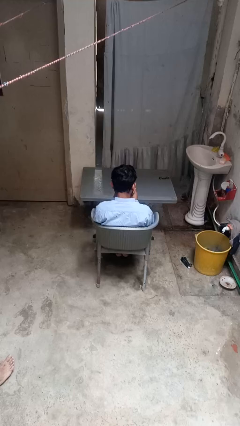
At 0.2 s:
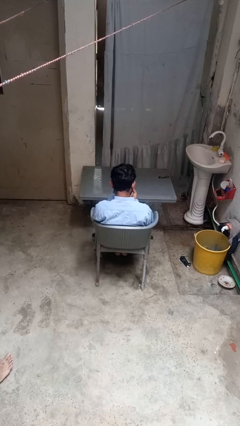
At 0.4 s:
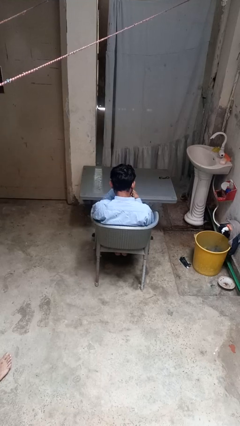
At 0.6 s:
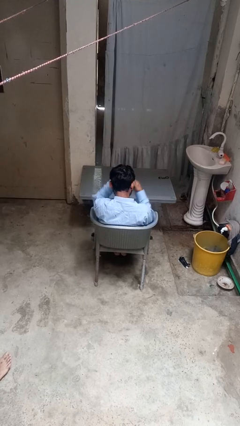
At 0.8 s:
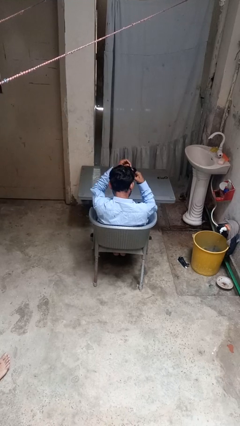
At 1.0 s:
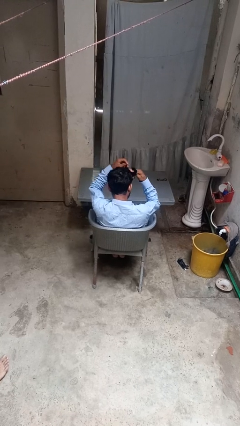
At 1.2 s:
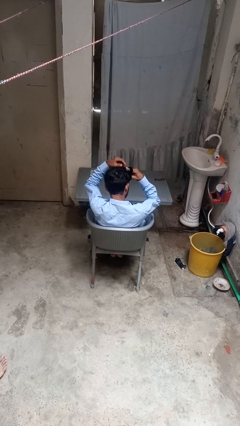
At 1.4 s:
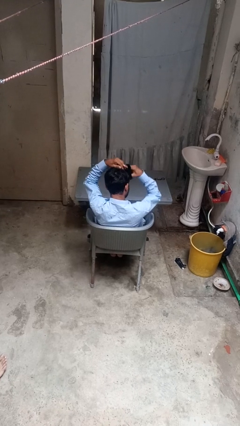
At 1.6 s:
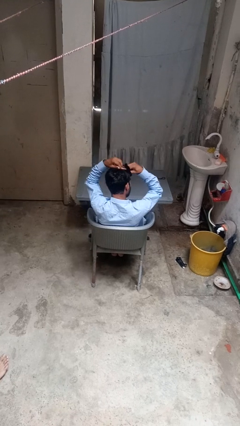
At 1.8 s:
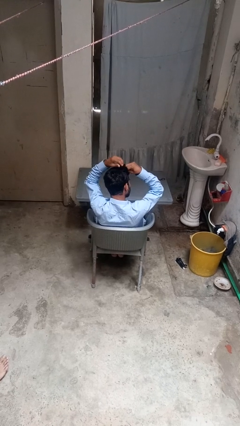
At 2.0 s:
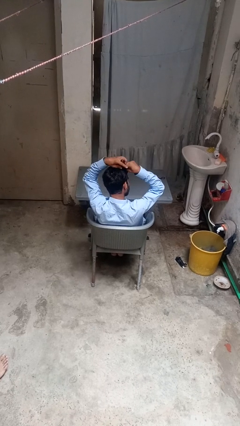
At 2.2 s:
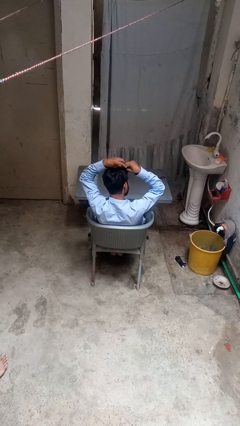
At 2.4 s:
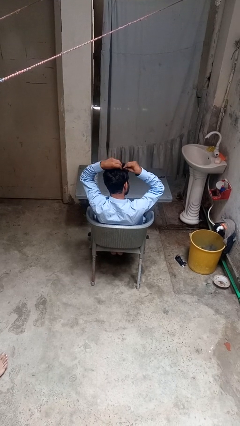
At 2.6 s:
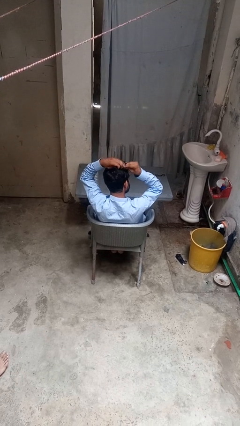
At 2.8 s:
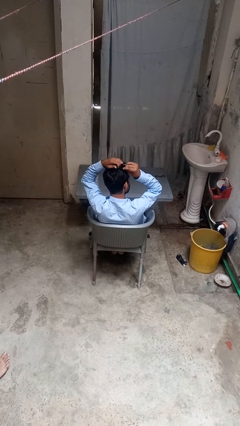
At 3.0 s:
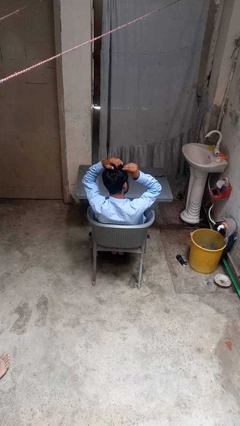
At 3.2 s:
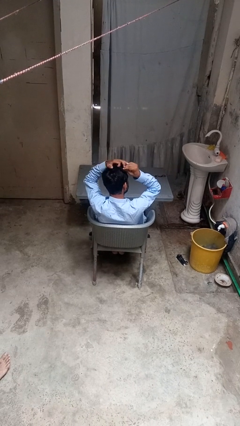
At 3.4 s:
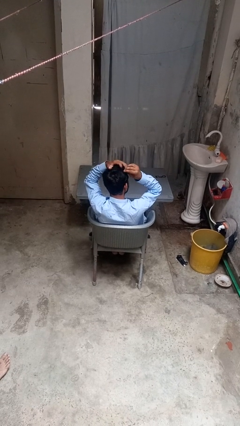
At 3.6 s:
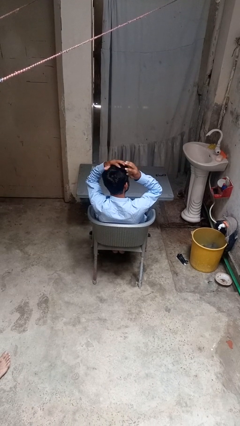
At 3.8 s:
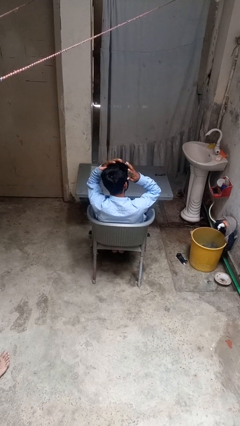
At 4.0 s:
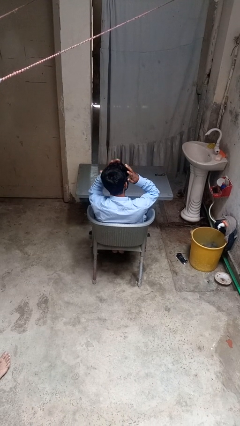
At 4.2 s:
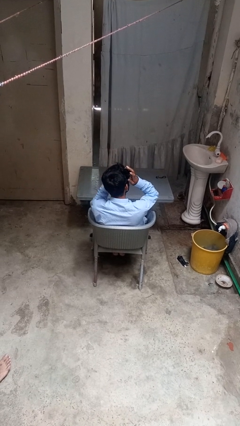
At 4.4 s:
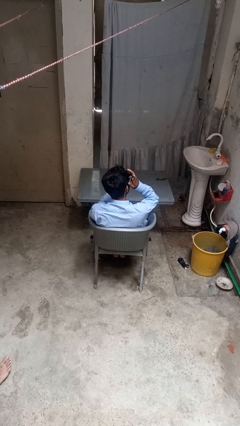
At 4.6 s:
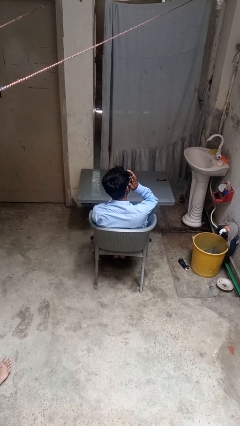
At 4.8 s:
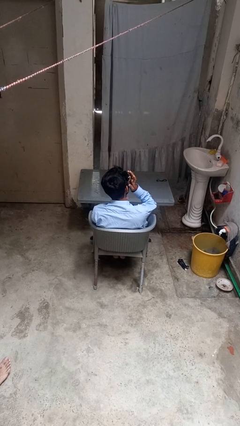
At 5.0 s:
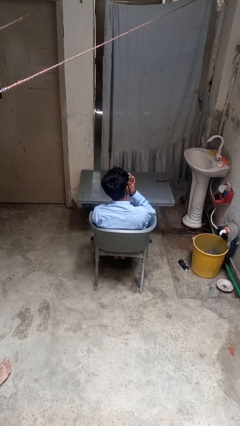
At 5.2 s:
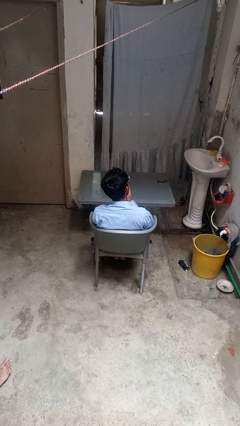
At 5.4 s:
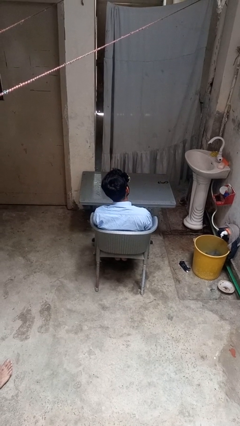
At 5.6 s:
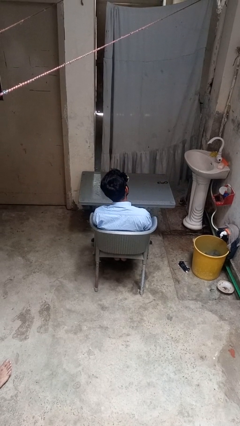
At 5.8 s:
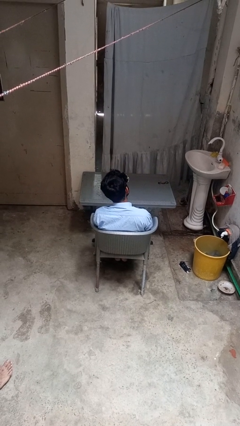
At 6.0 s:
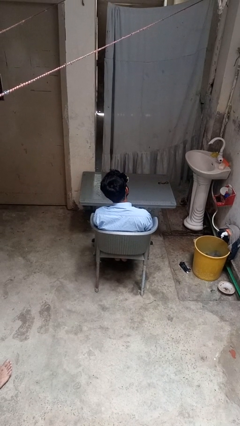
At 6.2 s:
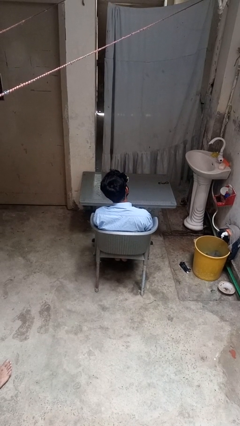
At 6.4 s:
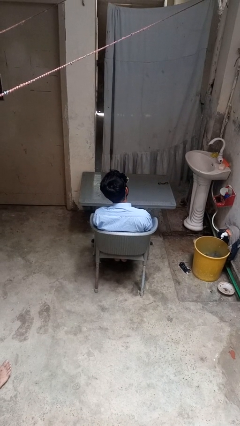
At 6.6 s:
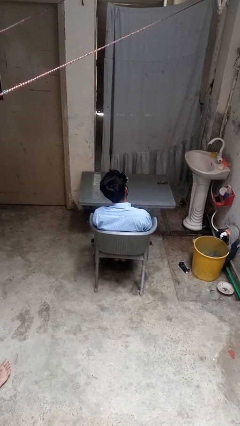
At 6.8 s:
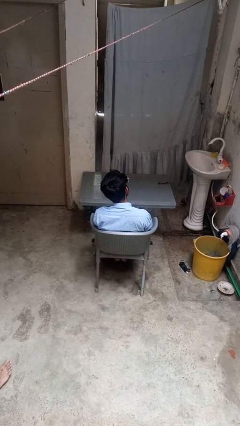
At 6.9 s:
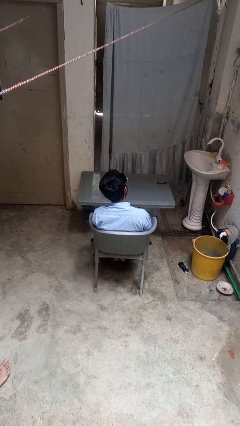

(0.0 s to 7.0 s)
person puts hair in ponytail

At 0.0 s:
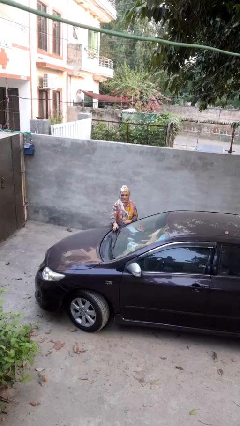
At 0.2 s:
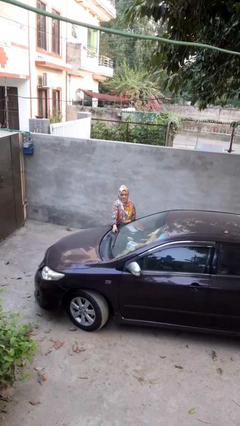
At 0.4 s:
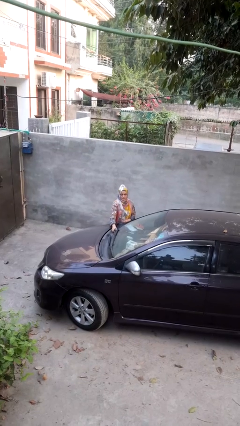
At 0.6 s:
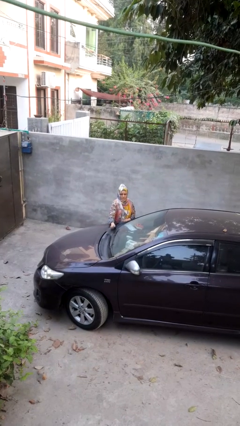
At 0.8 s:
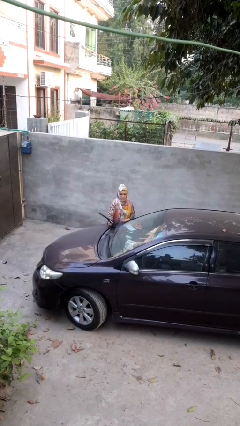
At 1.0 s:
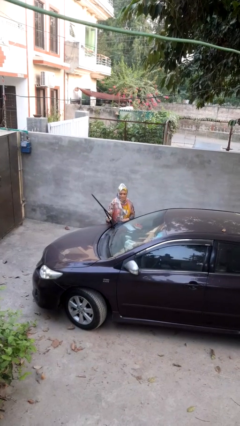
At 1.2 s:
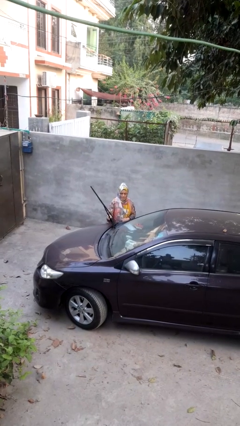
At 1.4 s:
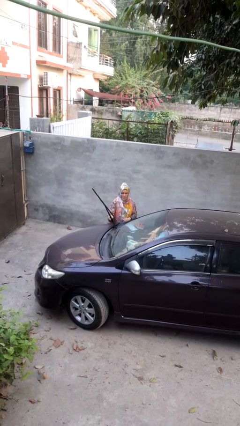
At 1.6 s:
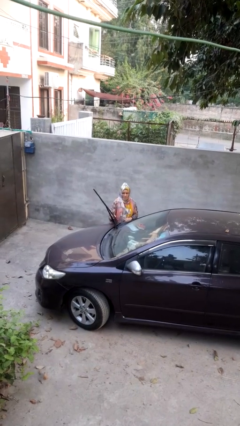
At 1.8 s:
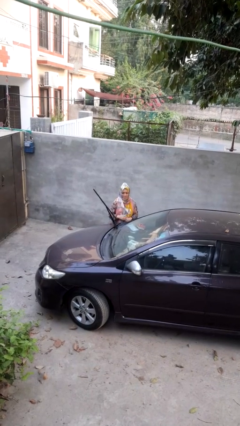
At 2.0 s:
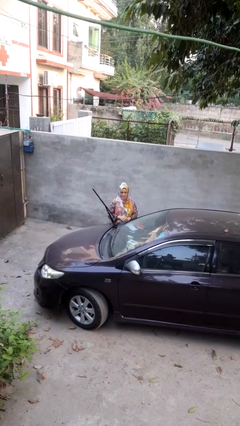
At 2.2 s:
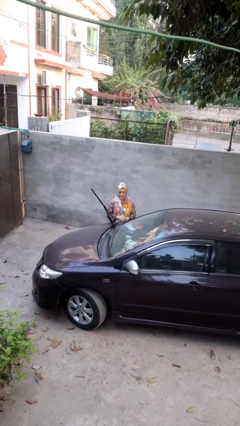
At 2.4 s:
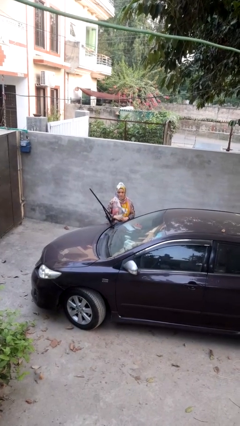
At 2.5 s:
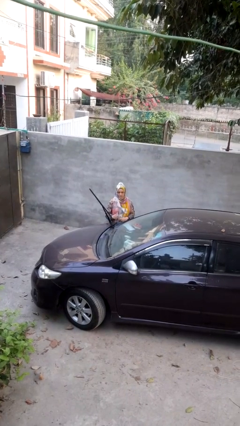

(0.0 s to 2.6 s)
person flips up car wipers

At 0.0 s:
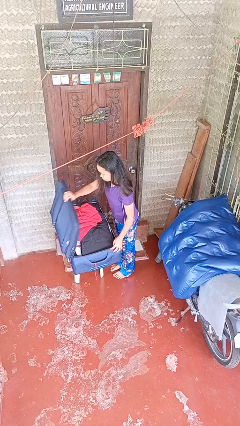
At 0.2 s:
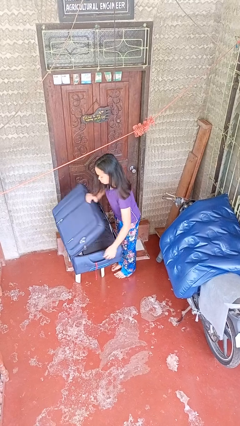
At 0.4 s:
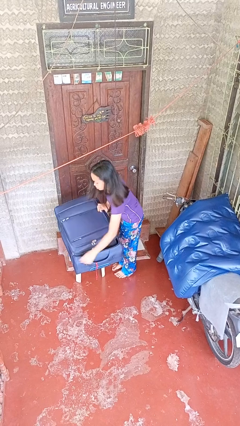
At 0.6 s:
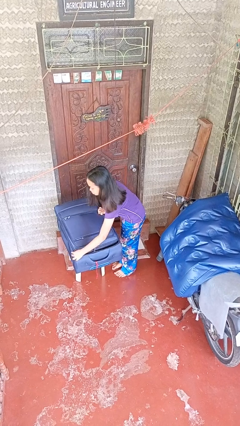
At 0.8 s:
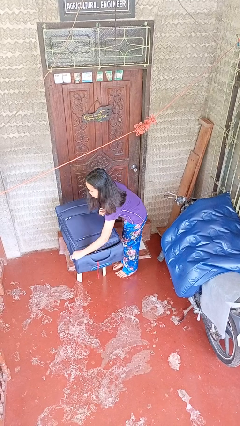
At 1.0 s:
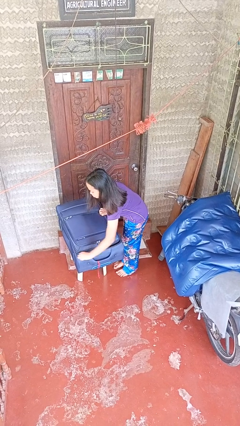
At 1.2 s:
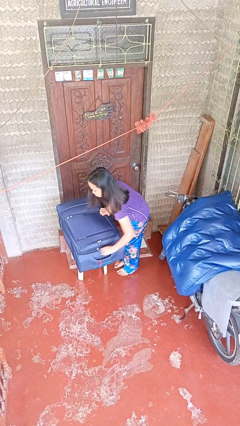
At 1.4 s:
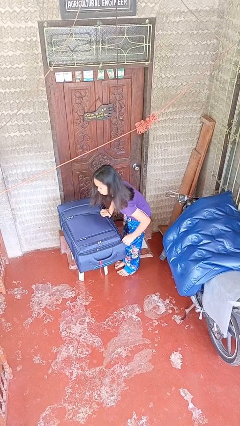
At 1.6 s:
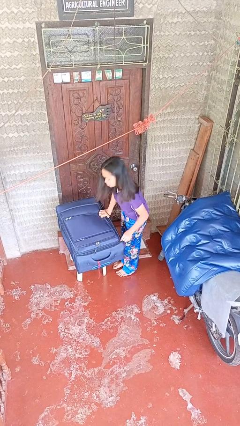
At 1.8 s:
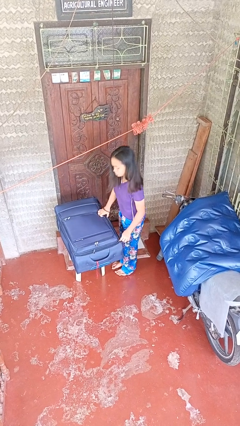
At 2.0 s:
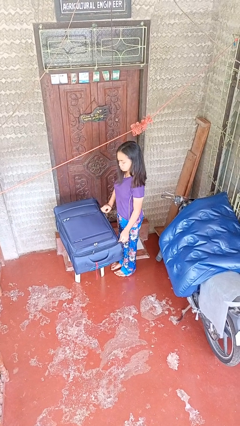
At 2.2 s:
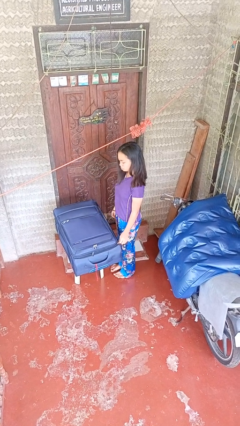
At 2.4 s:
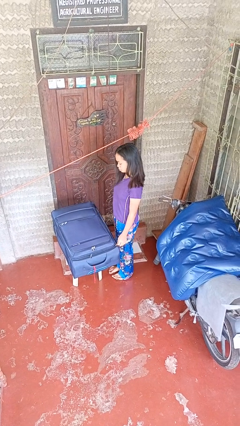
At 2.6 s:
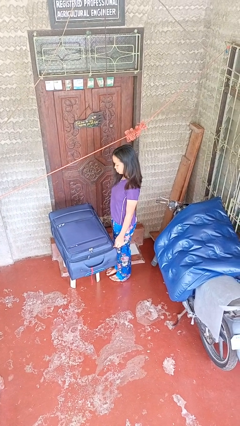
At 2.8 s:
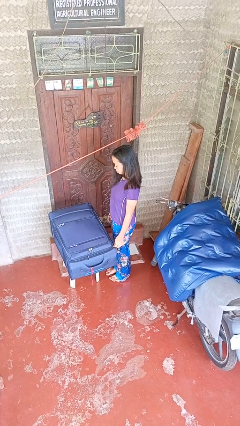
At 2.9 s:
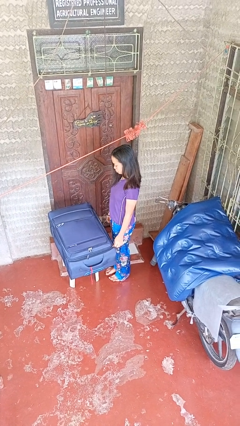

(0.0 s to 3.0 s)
person closes suitcase

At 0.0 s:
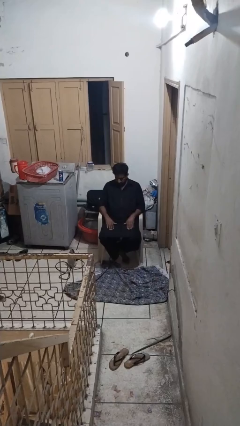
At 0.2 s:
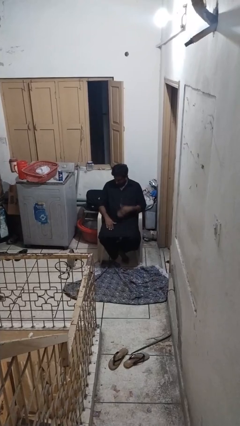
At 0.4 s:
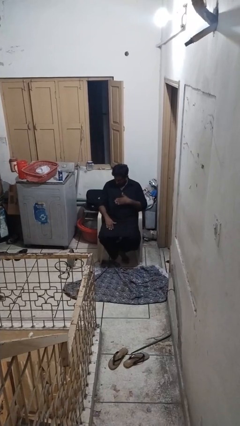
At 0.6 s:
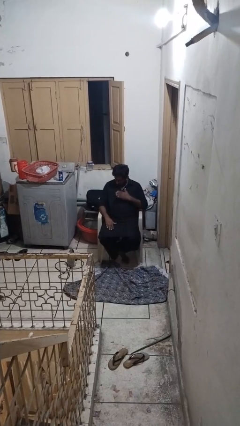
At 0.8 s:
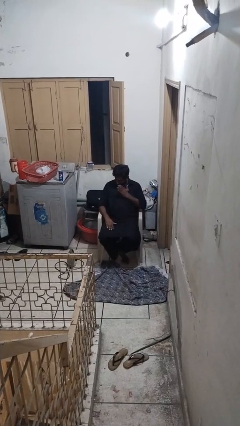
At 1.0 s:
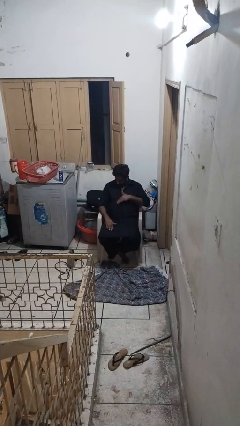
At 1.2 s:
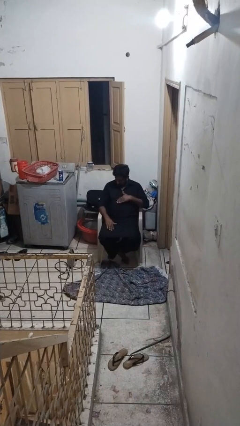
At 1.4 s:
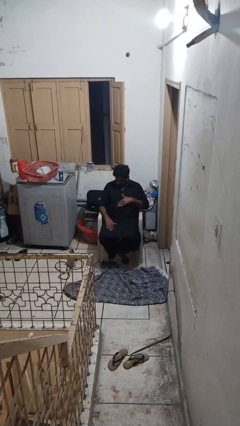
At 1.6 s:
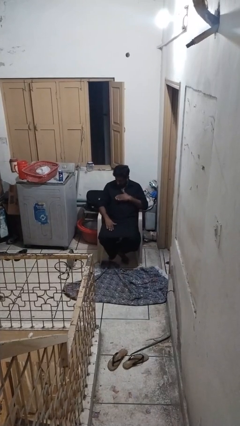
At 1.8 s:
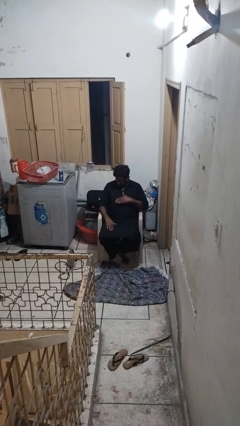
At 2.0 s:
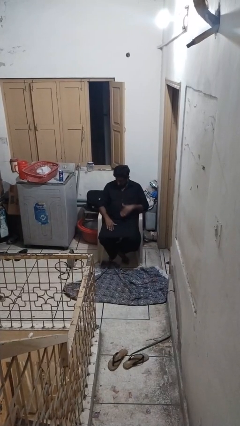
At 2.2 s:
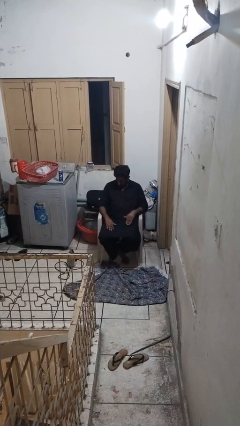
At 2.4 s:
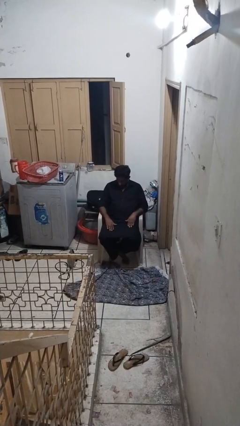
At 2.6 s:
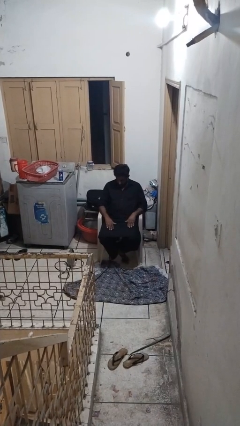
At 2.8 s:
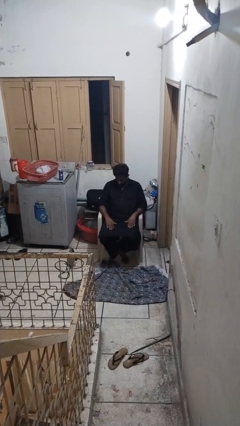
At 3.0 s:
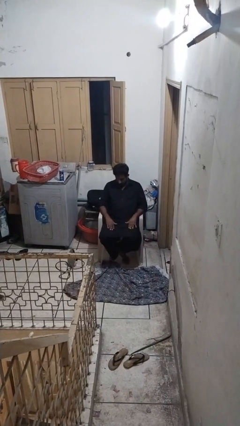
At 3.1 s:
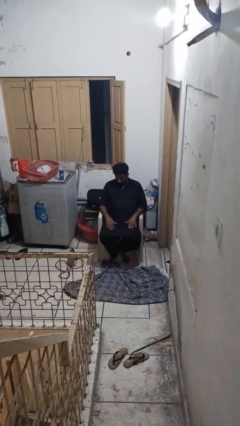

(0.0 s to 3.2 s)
person swats bug

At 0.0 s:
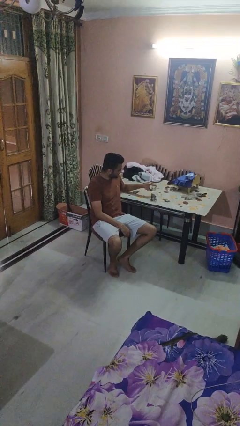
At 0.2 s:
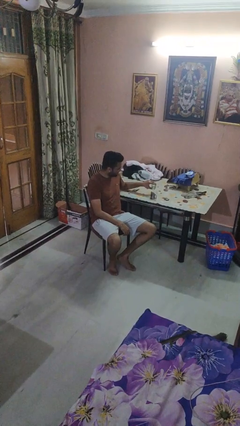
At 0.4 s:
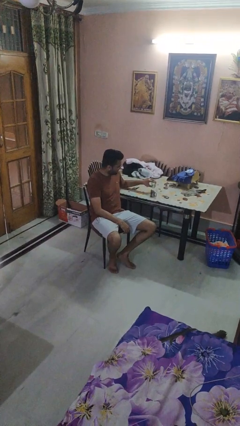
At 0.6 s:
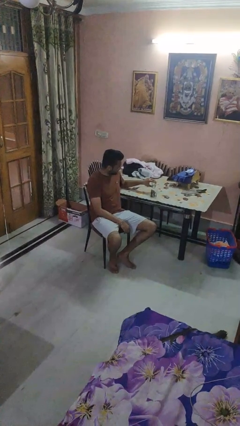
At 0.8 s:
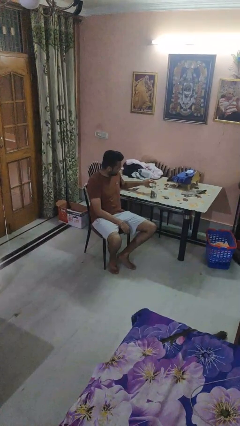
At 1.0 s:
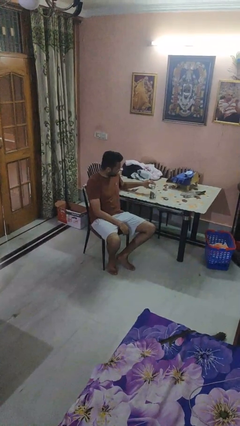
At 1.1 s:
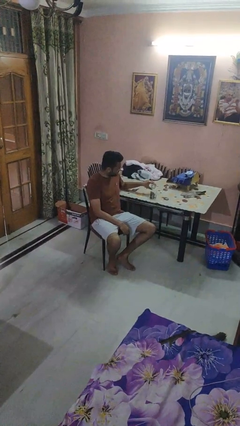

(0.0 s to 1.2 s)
person pours liquid into cup

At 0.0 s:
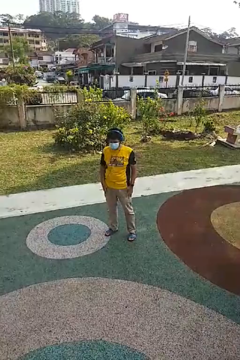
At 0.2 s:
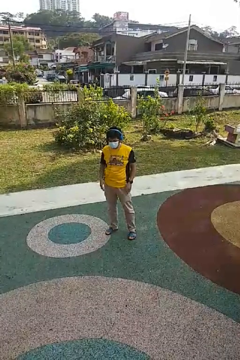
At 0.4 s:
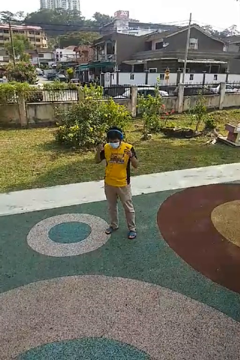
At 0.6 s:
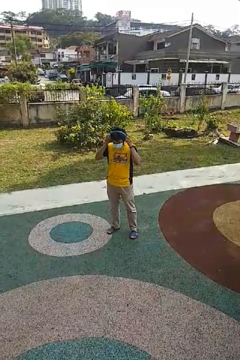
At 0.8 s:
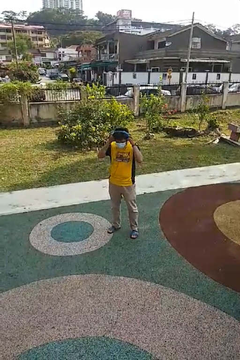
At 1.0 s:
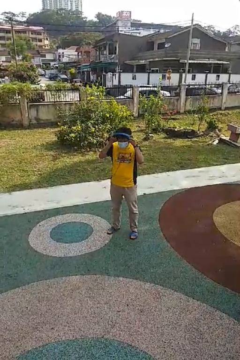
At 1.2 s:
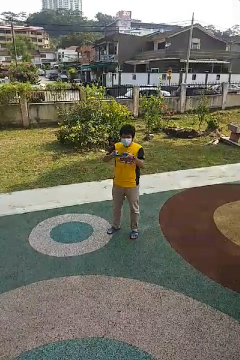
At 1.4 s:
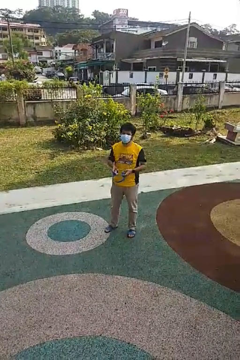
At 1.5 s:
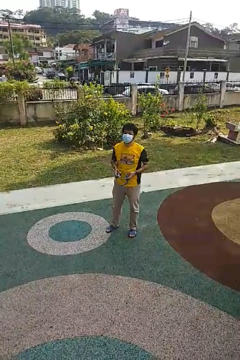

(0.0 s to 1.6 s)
person takes off headphones
